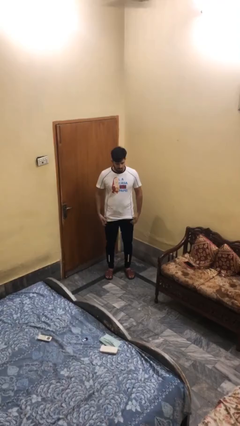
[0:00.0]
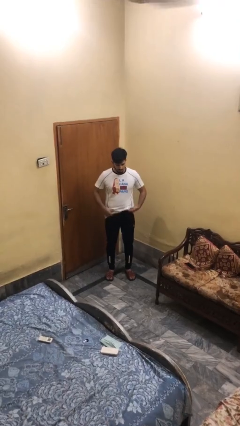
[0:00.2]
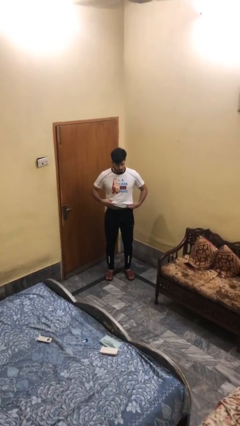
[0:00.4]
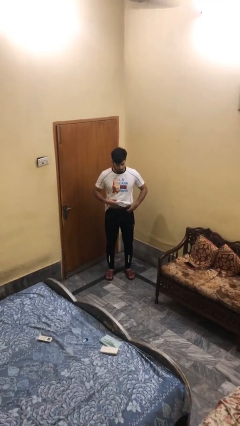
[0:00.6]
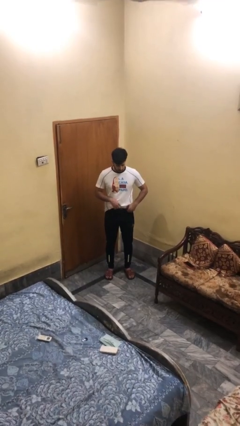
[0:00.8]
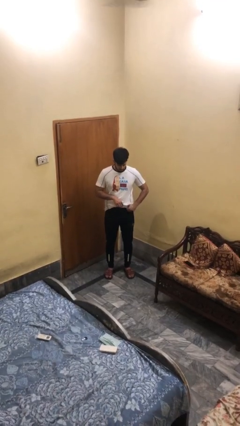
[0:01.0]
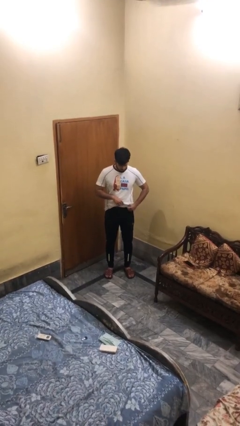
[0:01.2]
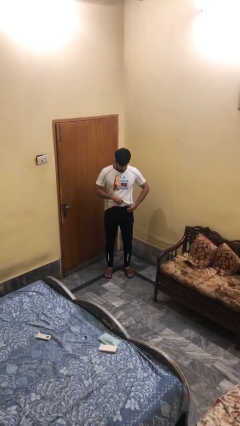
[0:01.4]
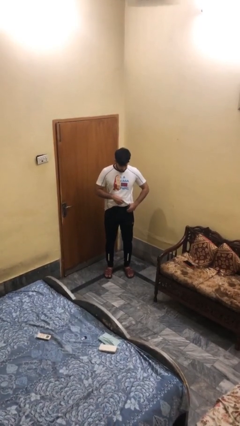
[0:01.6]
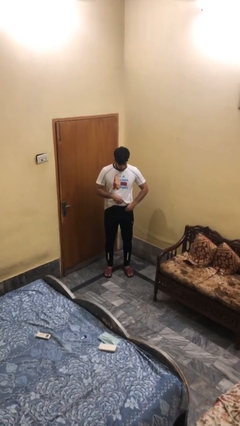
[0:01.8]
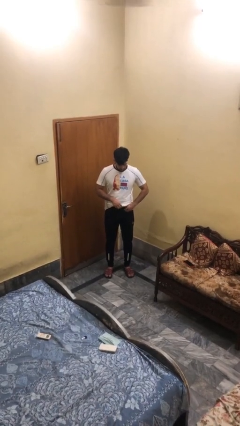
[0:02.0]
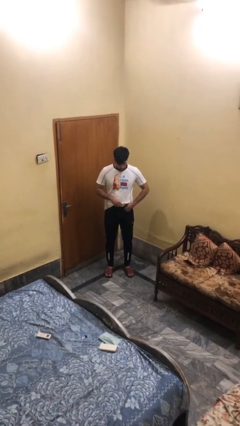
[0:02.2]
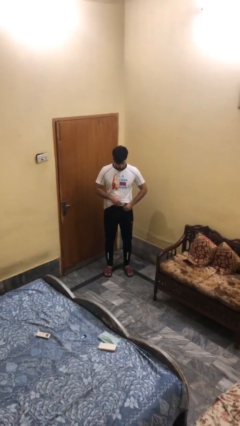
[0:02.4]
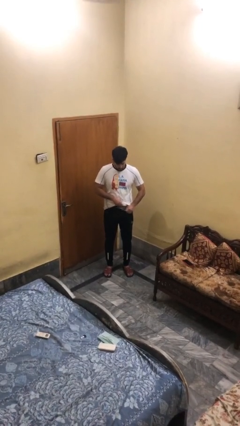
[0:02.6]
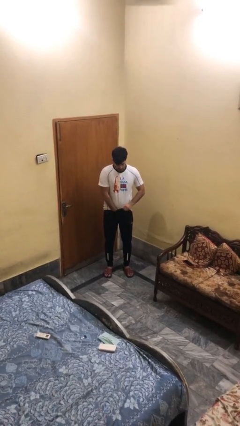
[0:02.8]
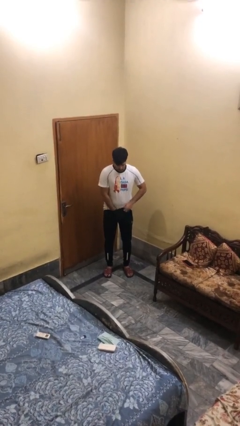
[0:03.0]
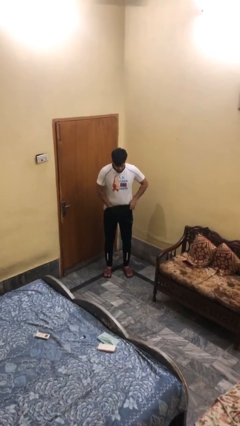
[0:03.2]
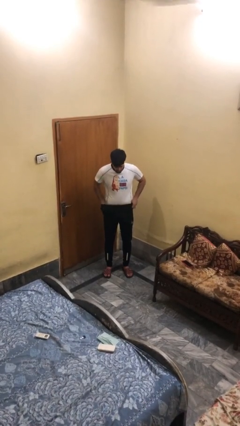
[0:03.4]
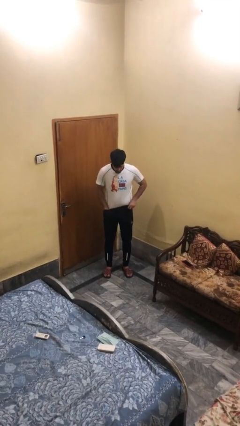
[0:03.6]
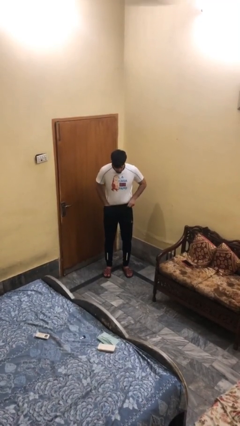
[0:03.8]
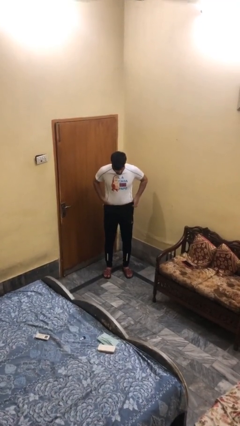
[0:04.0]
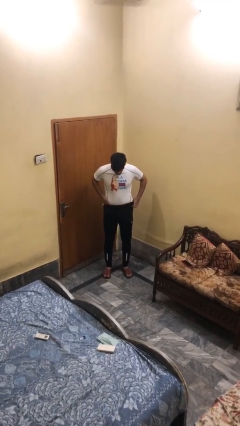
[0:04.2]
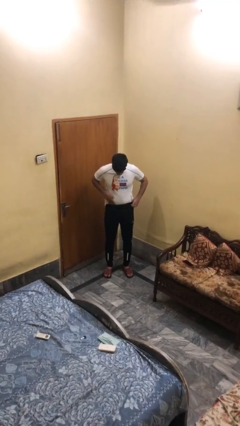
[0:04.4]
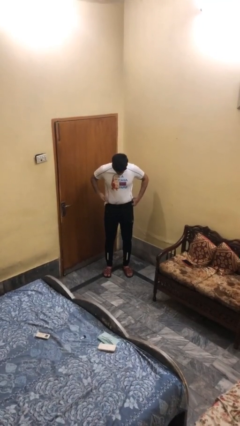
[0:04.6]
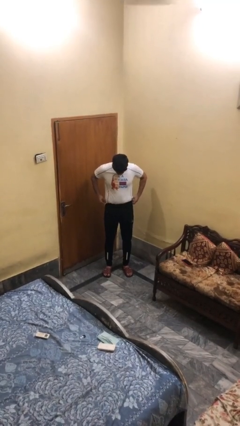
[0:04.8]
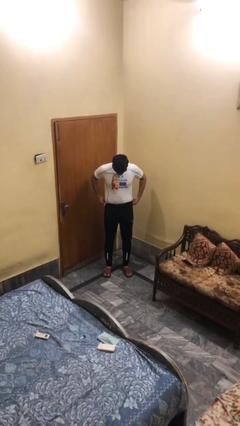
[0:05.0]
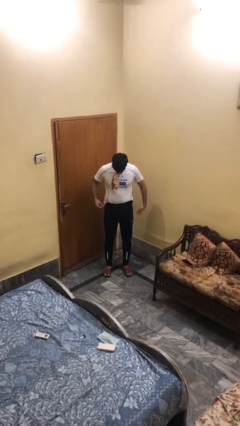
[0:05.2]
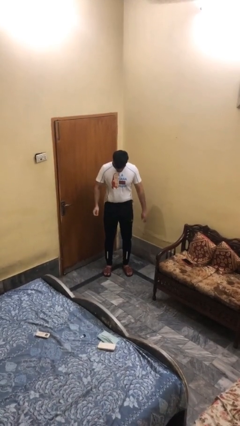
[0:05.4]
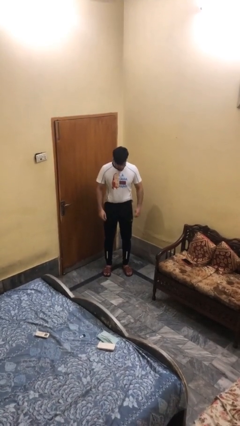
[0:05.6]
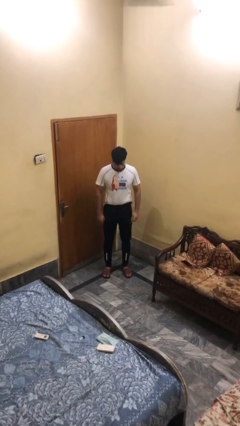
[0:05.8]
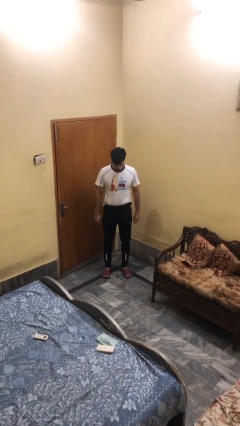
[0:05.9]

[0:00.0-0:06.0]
person tucks in shirt

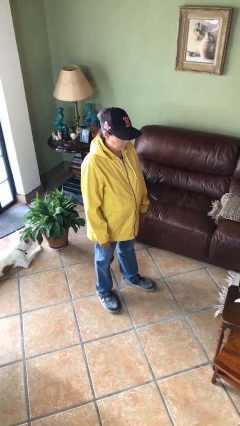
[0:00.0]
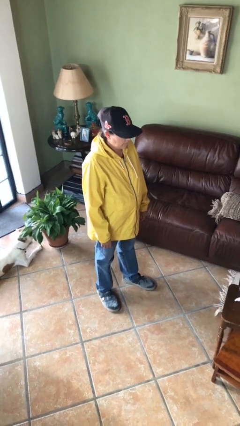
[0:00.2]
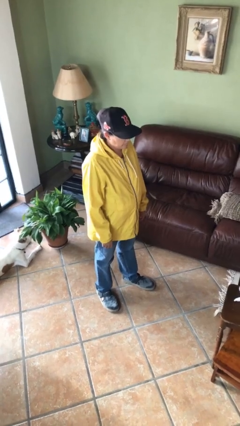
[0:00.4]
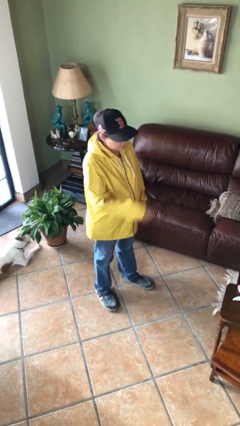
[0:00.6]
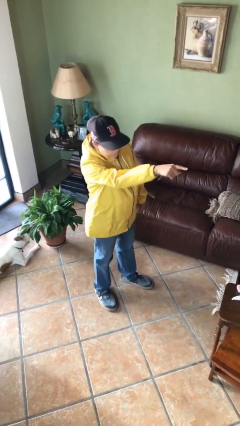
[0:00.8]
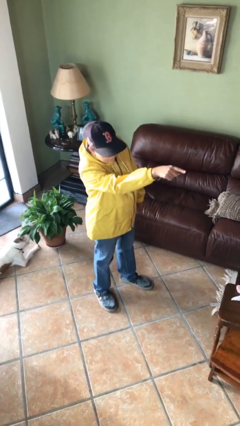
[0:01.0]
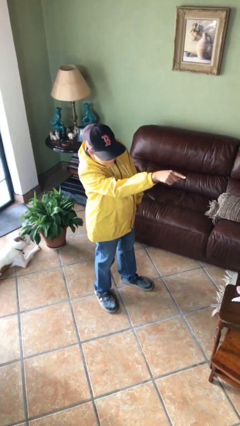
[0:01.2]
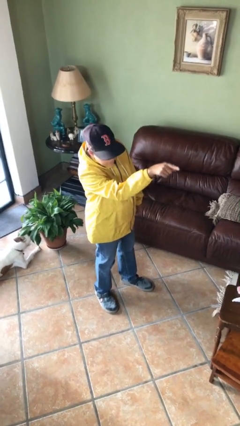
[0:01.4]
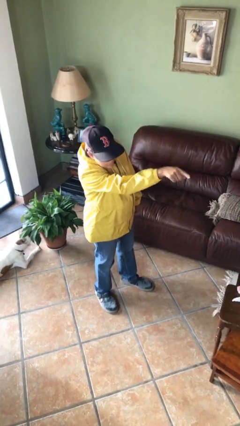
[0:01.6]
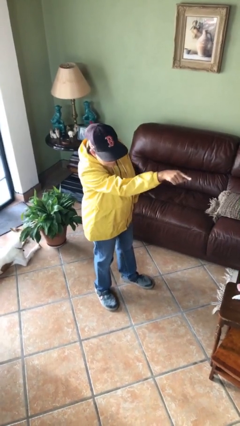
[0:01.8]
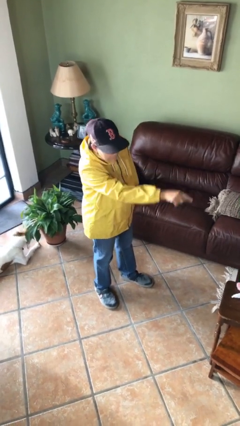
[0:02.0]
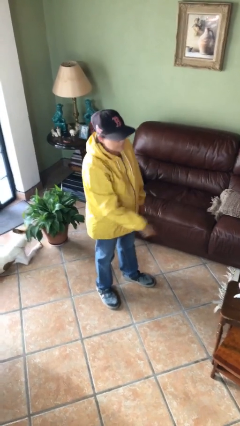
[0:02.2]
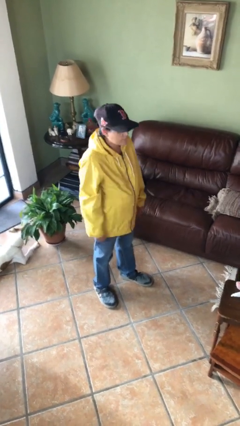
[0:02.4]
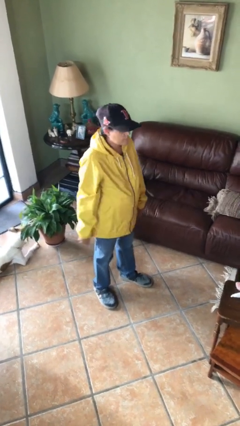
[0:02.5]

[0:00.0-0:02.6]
person points at person

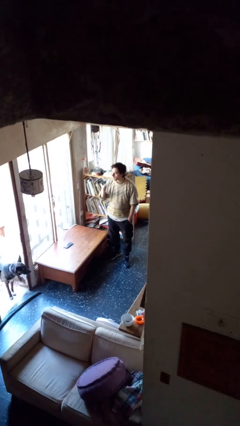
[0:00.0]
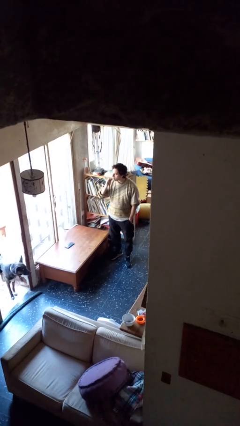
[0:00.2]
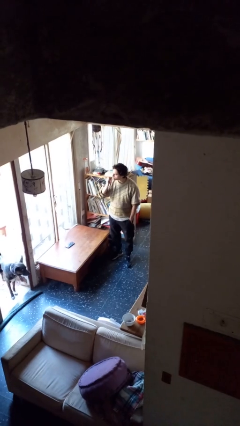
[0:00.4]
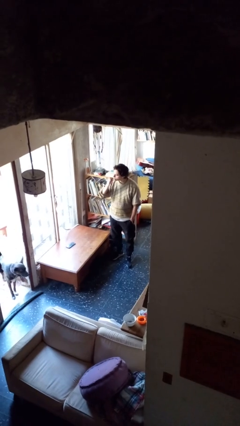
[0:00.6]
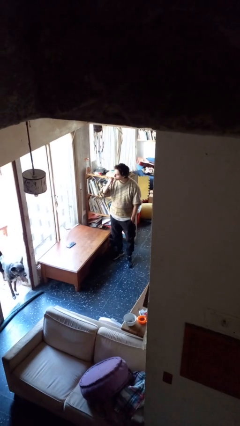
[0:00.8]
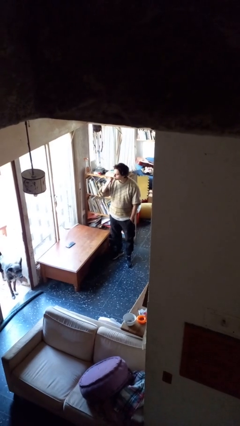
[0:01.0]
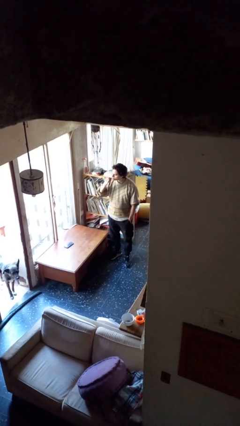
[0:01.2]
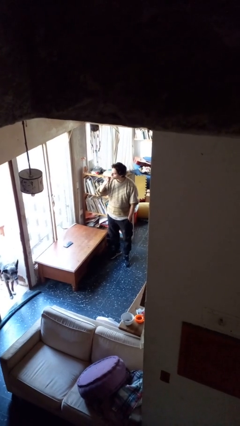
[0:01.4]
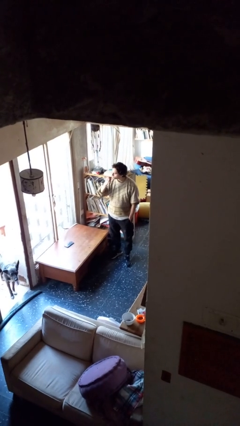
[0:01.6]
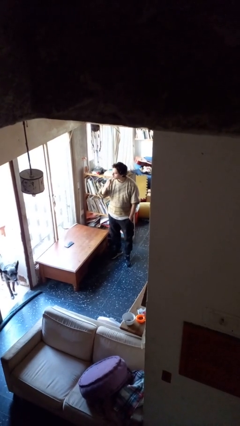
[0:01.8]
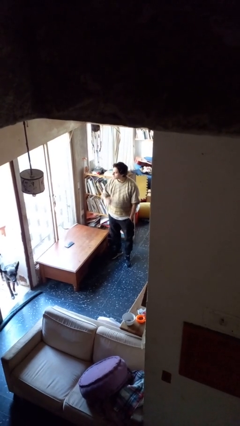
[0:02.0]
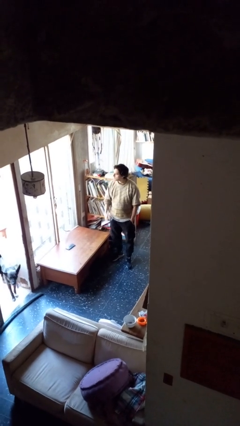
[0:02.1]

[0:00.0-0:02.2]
person brushes teeth

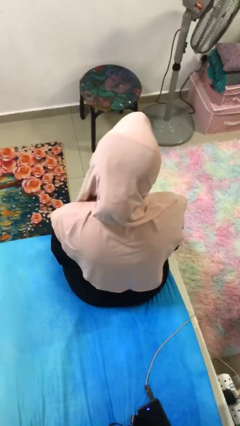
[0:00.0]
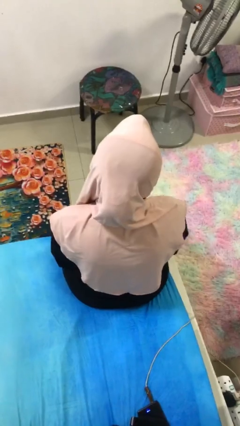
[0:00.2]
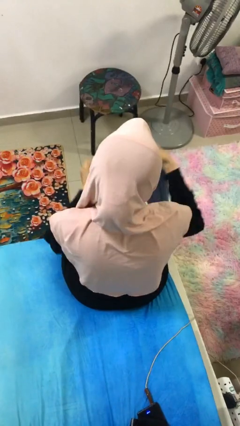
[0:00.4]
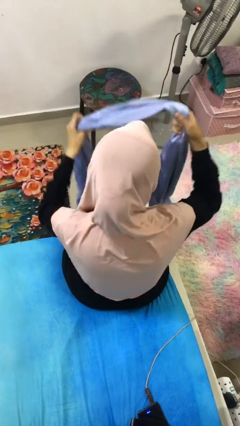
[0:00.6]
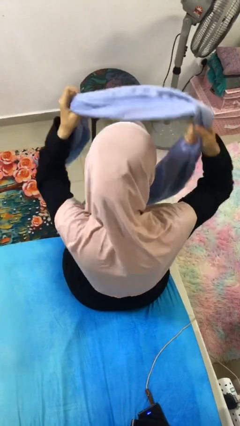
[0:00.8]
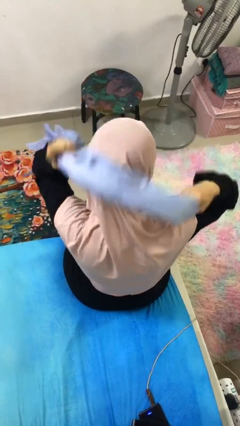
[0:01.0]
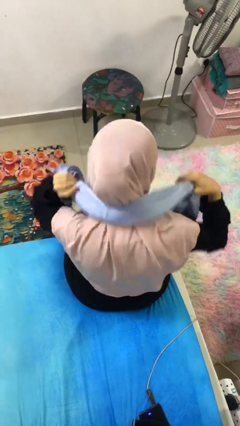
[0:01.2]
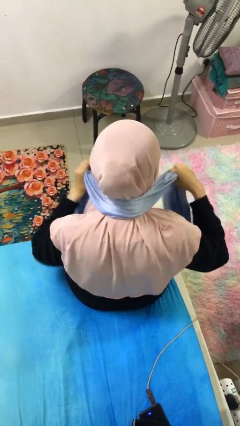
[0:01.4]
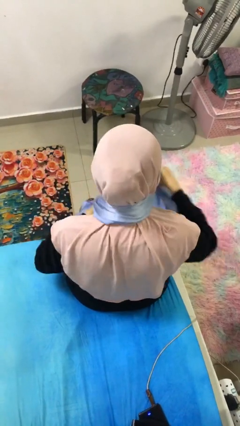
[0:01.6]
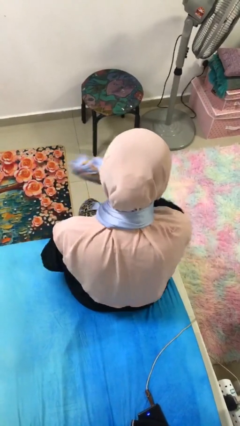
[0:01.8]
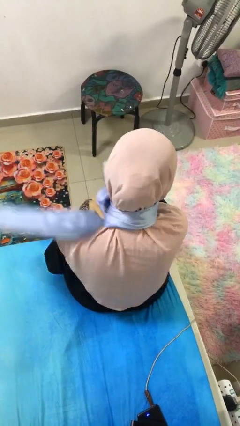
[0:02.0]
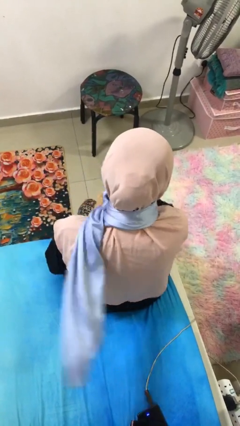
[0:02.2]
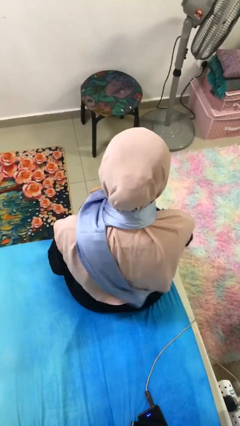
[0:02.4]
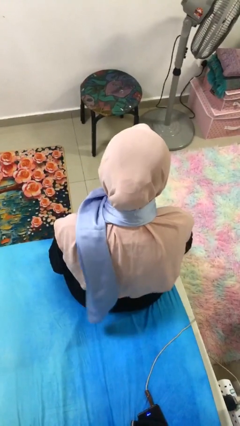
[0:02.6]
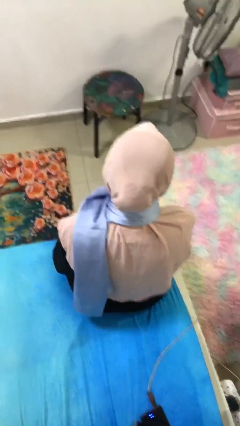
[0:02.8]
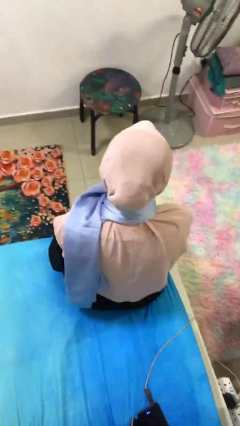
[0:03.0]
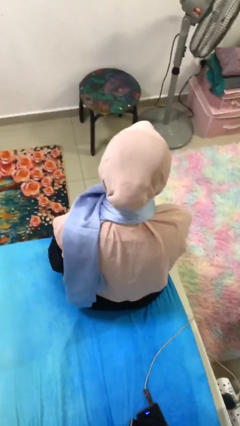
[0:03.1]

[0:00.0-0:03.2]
person puts on scarf

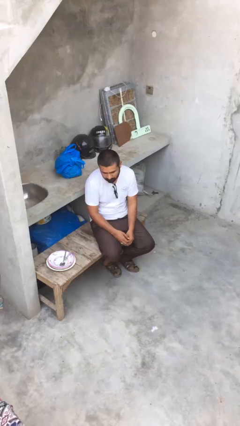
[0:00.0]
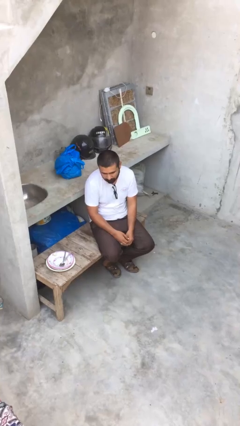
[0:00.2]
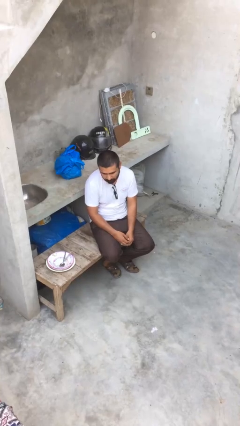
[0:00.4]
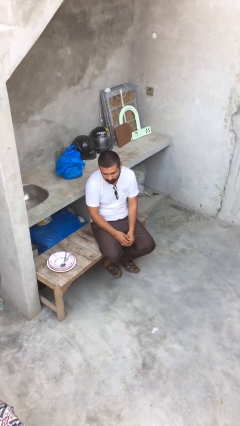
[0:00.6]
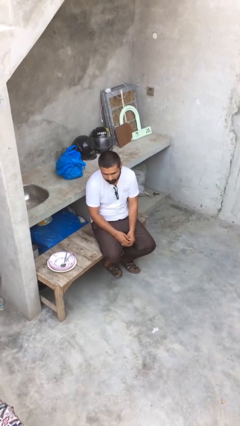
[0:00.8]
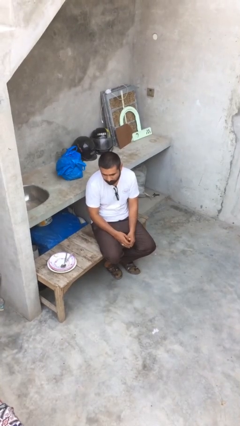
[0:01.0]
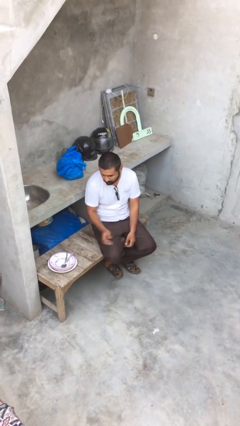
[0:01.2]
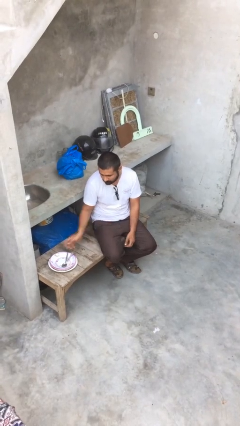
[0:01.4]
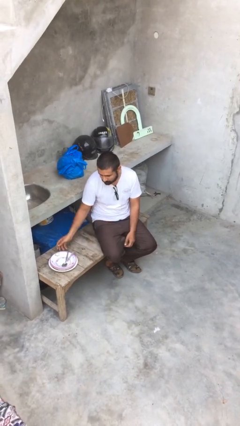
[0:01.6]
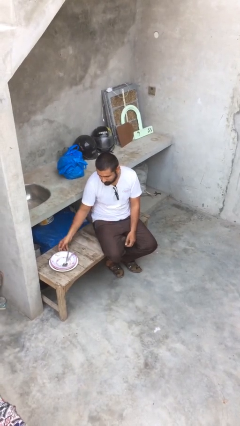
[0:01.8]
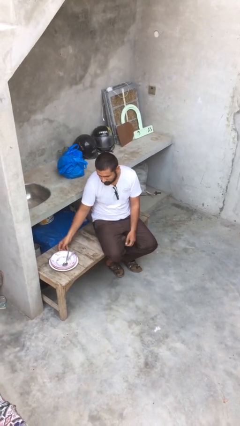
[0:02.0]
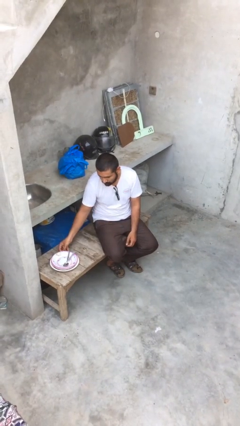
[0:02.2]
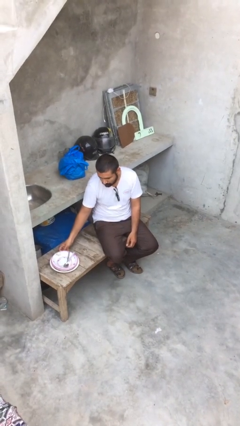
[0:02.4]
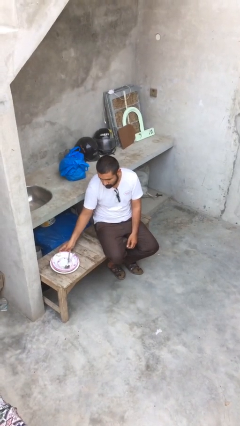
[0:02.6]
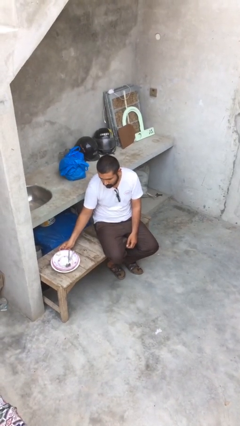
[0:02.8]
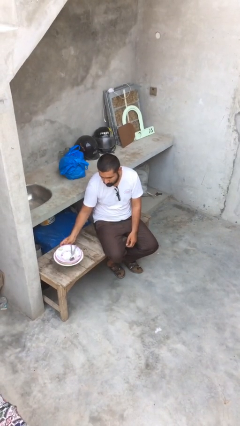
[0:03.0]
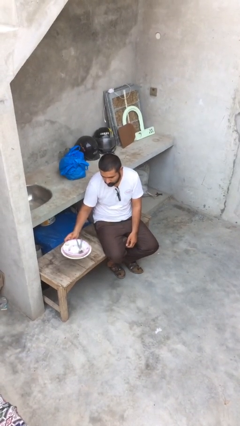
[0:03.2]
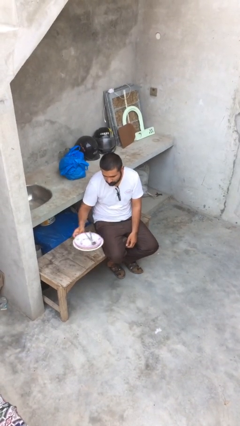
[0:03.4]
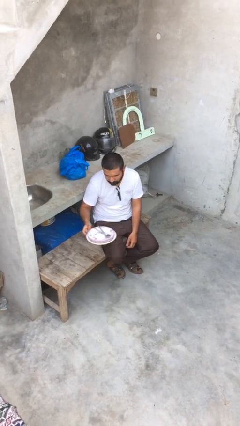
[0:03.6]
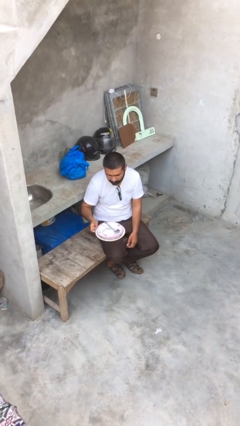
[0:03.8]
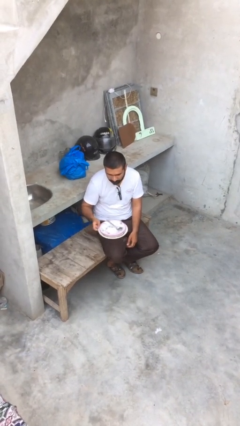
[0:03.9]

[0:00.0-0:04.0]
person picks up object from table
